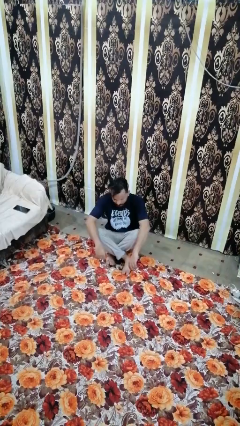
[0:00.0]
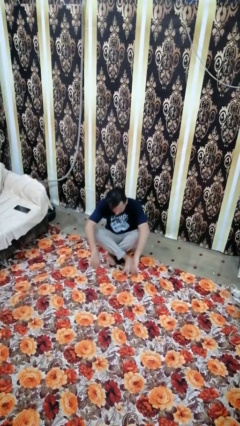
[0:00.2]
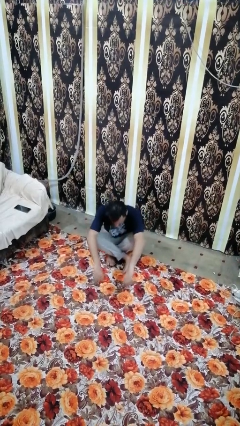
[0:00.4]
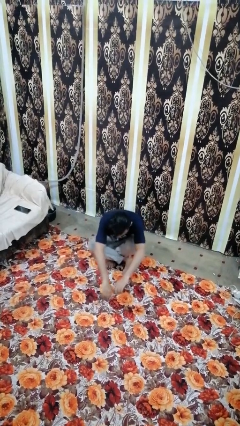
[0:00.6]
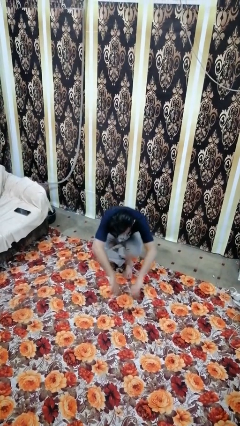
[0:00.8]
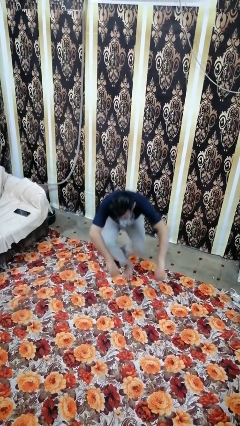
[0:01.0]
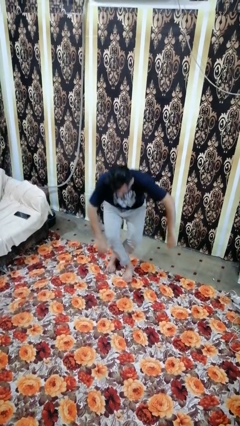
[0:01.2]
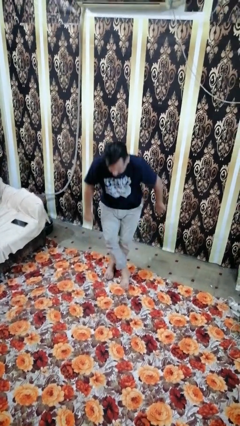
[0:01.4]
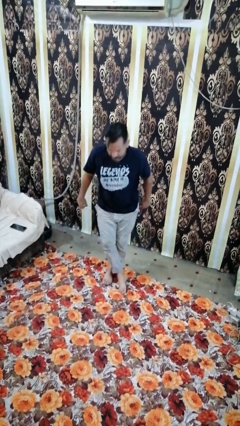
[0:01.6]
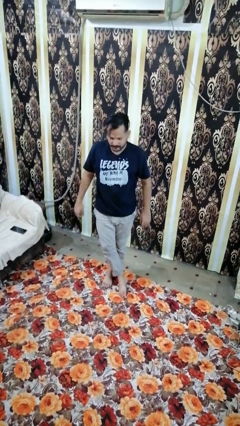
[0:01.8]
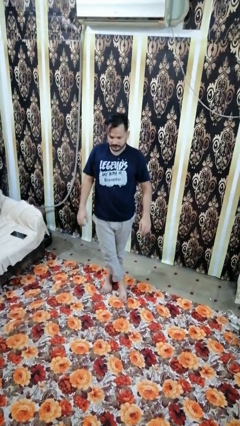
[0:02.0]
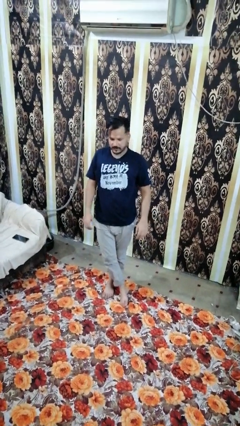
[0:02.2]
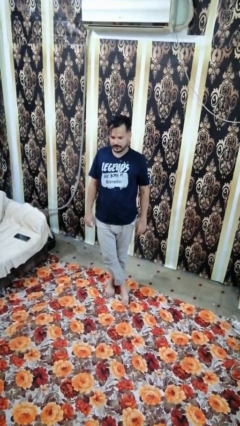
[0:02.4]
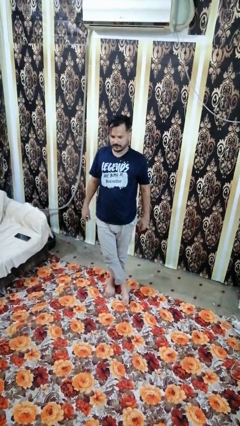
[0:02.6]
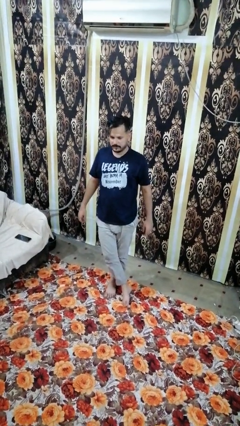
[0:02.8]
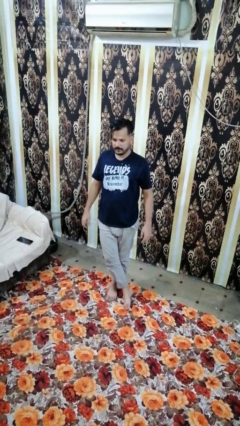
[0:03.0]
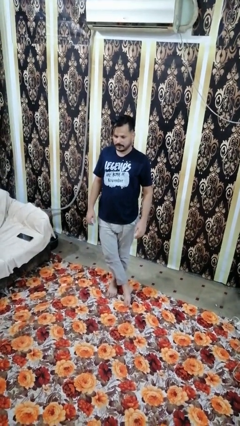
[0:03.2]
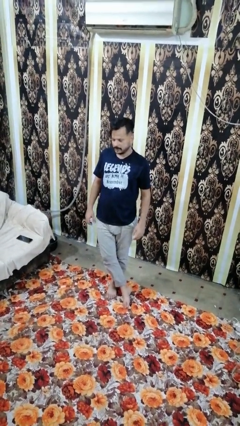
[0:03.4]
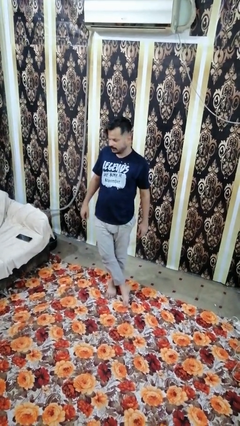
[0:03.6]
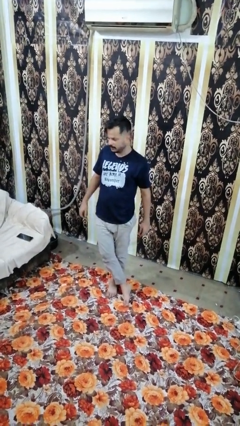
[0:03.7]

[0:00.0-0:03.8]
person stands up from floor

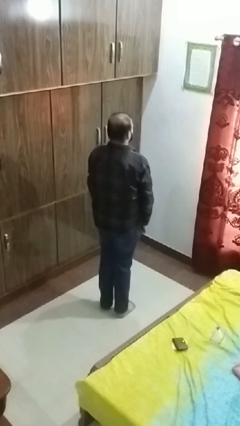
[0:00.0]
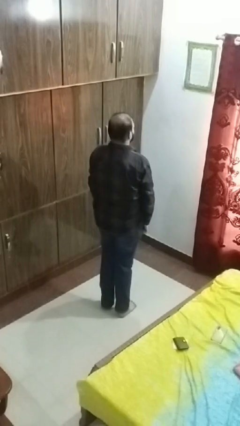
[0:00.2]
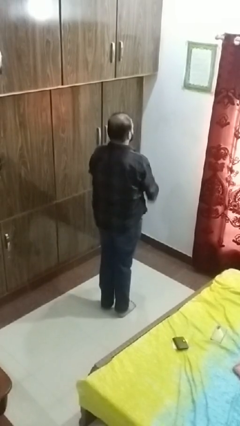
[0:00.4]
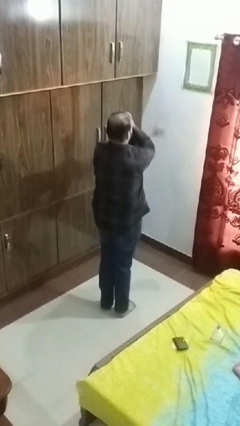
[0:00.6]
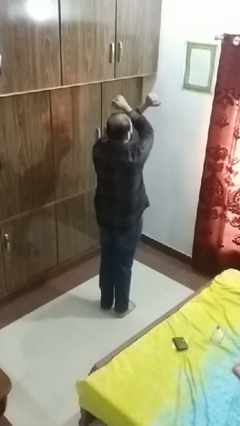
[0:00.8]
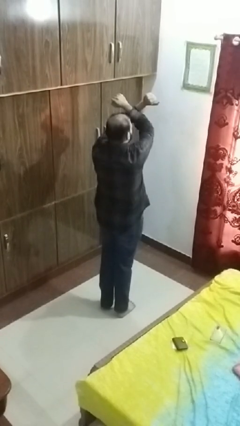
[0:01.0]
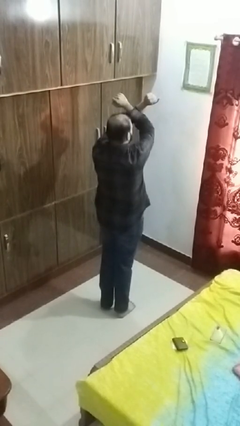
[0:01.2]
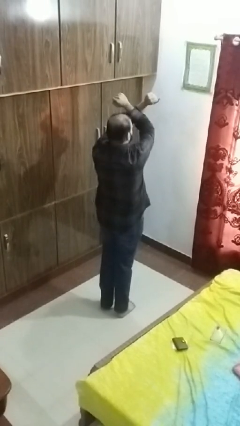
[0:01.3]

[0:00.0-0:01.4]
person gestures arms x

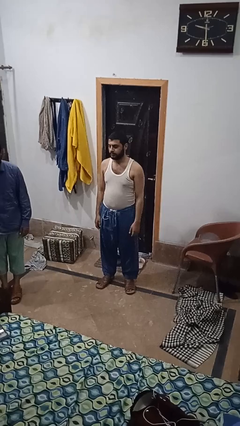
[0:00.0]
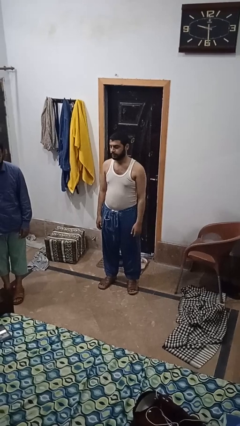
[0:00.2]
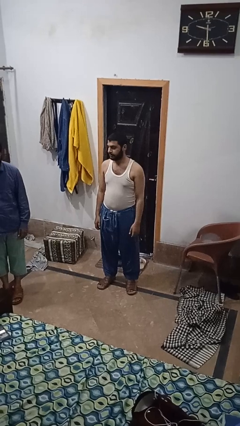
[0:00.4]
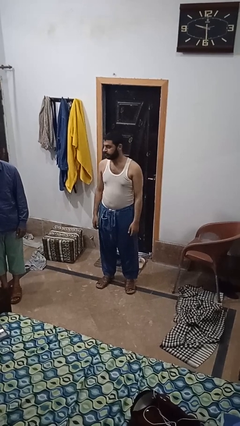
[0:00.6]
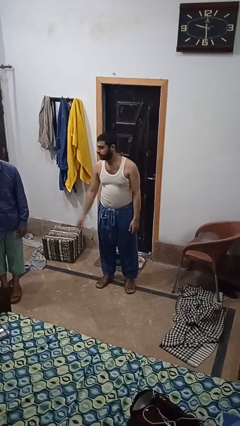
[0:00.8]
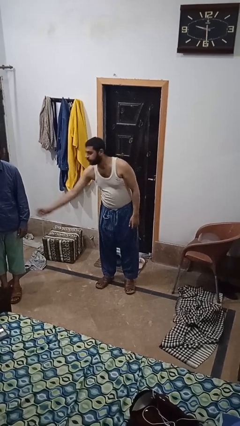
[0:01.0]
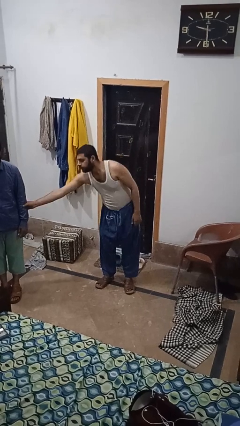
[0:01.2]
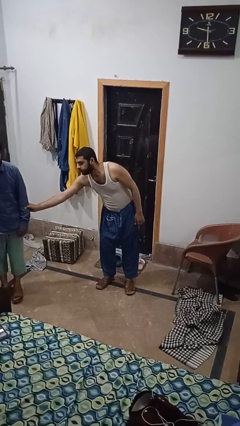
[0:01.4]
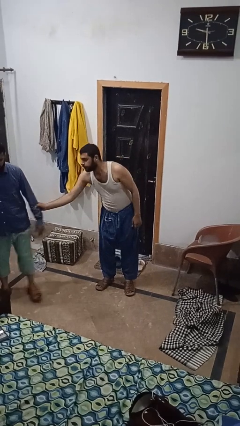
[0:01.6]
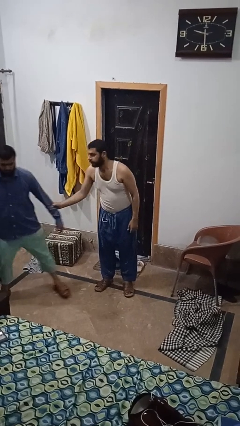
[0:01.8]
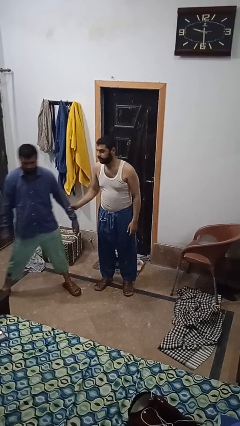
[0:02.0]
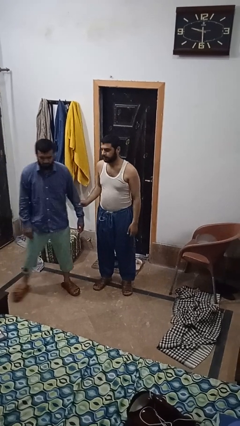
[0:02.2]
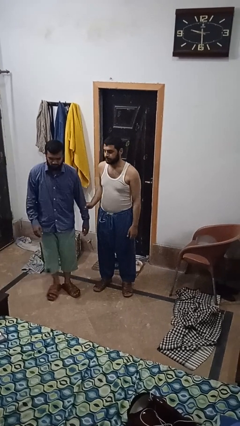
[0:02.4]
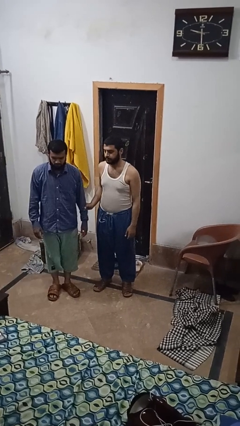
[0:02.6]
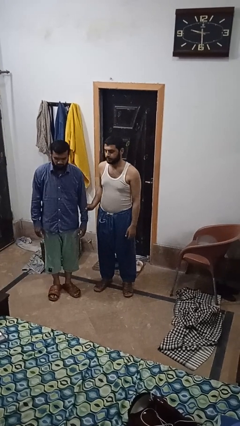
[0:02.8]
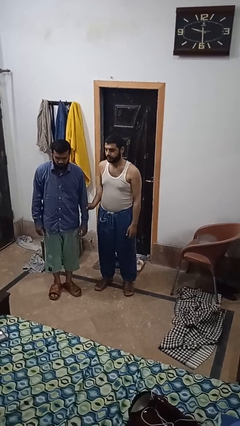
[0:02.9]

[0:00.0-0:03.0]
person grabs person by forearm

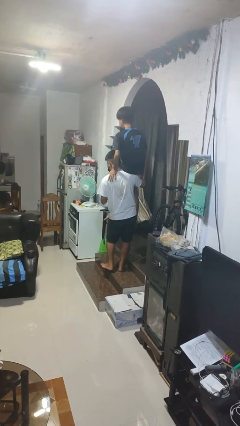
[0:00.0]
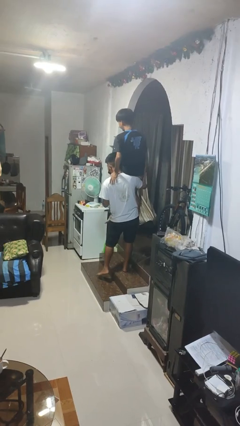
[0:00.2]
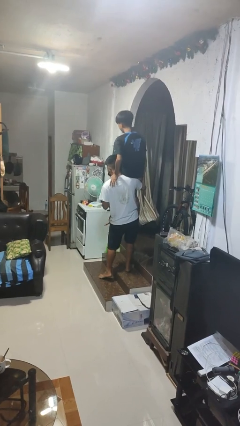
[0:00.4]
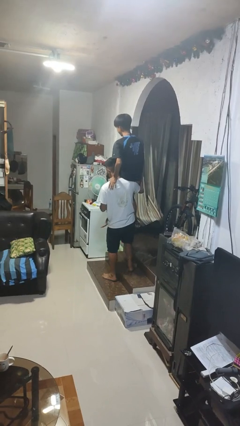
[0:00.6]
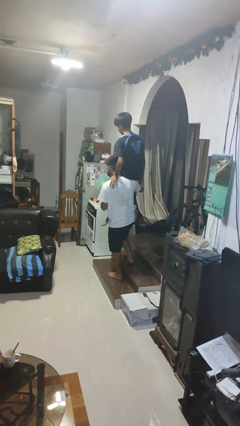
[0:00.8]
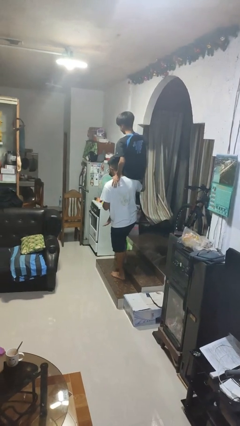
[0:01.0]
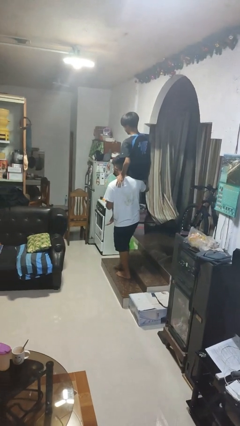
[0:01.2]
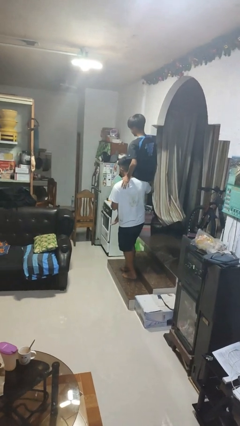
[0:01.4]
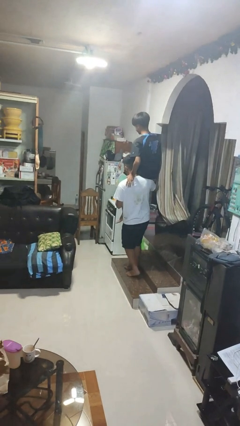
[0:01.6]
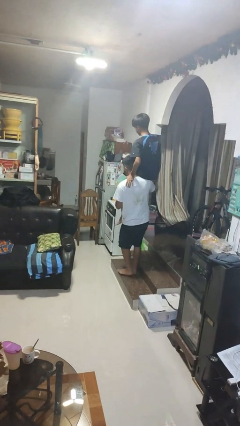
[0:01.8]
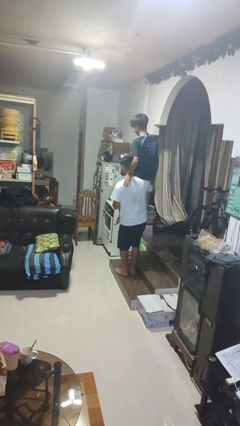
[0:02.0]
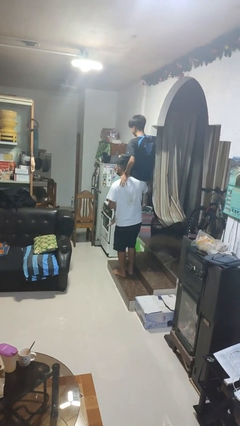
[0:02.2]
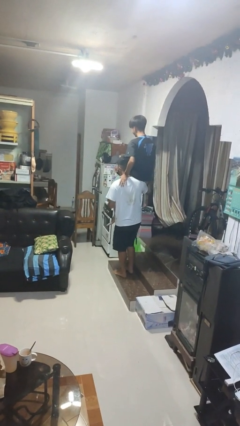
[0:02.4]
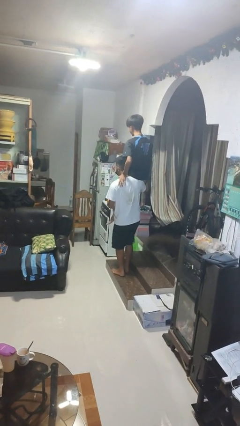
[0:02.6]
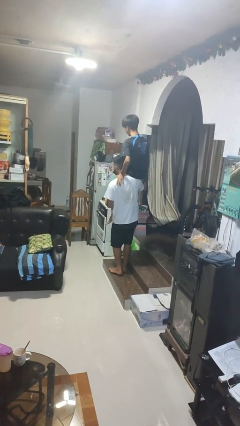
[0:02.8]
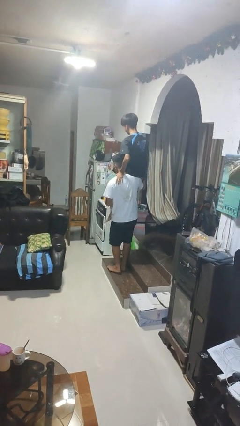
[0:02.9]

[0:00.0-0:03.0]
person carries person on shoulders

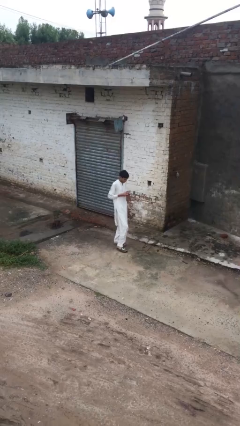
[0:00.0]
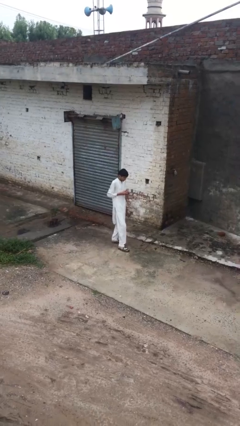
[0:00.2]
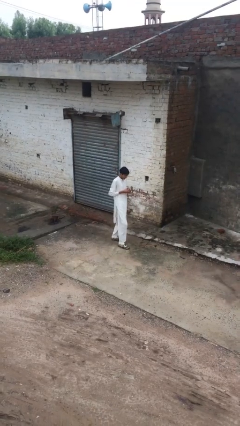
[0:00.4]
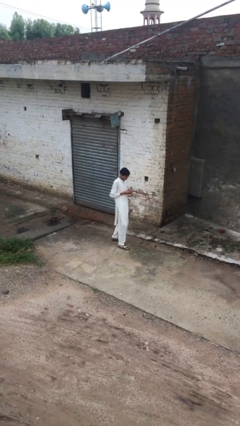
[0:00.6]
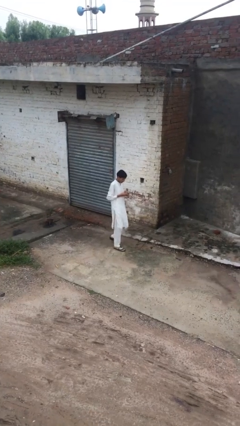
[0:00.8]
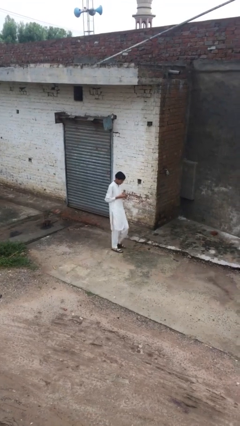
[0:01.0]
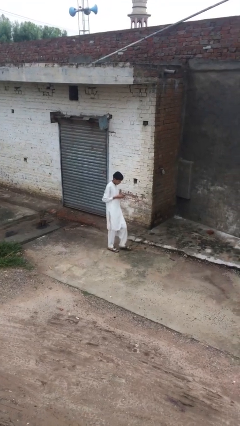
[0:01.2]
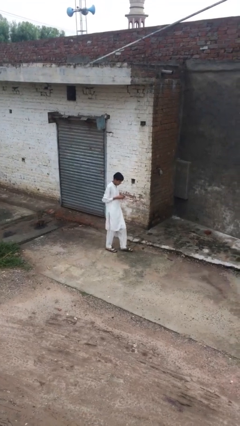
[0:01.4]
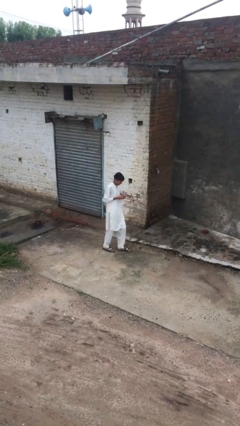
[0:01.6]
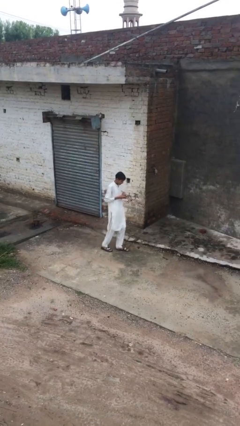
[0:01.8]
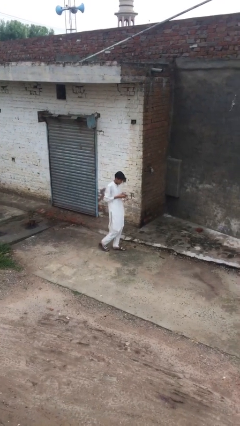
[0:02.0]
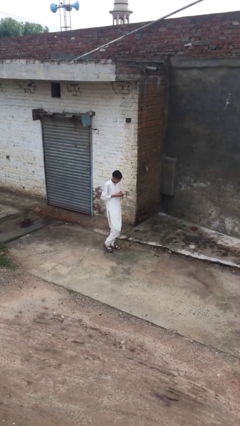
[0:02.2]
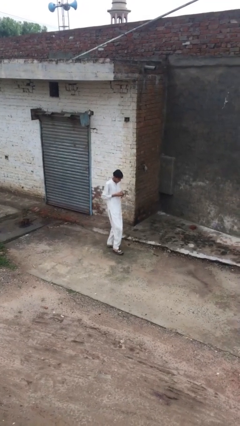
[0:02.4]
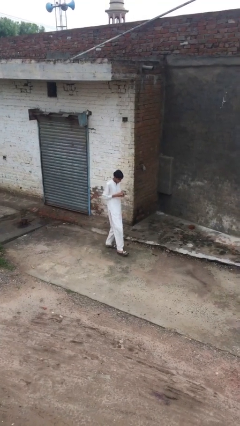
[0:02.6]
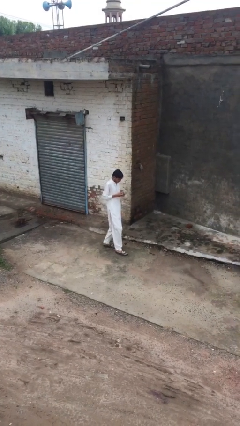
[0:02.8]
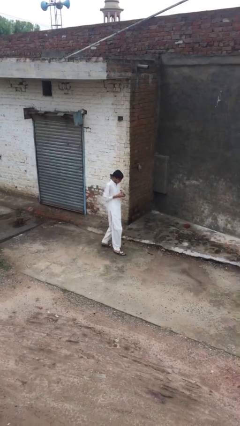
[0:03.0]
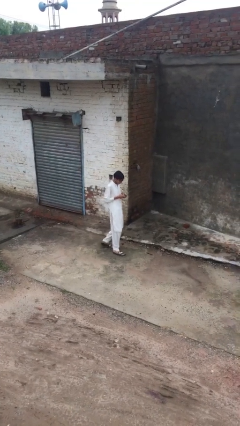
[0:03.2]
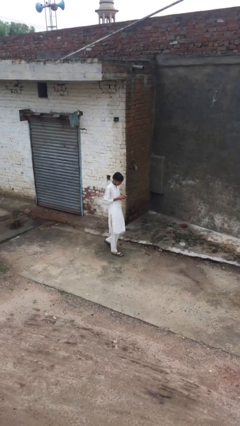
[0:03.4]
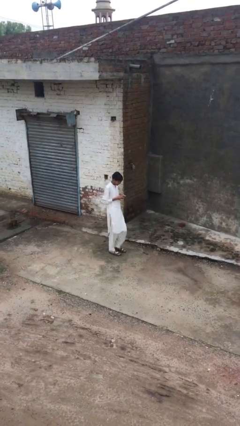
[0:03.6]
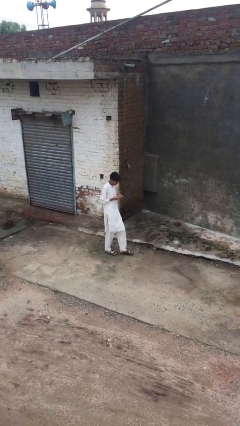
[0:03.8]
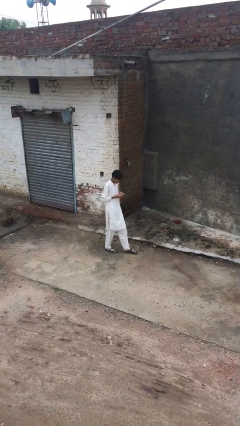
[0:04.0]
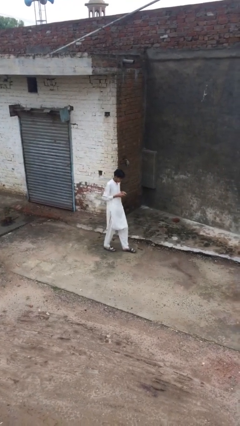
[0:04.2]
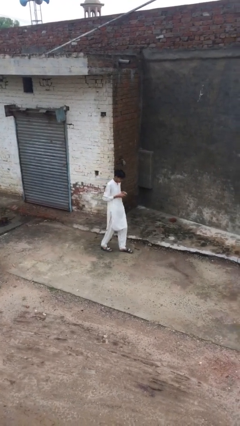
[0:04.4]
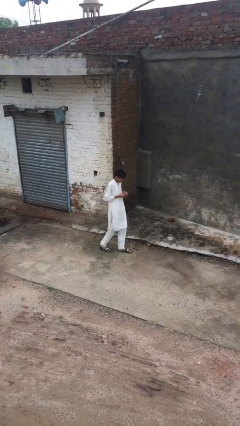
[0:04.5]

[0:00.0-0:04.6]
person texts on phone

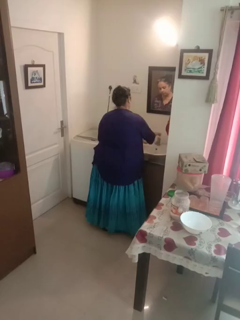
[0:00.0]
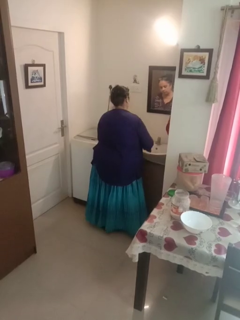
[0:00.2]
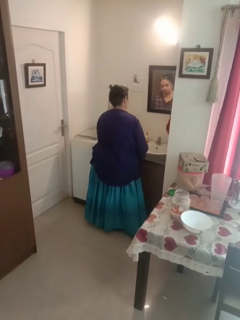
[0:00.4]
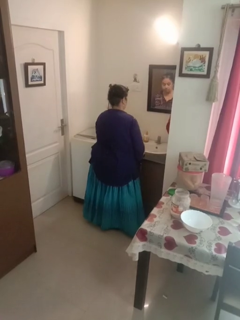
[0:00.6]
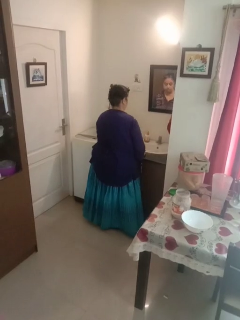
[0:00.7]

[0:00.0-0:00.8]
person turns off faucet

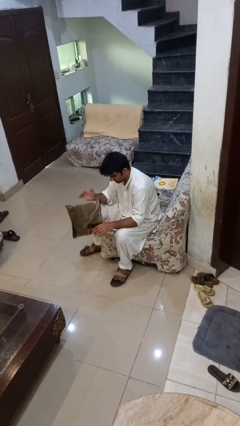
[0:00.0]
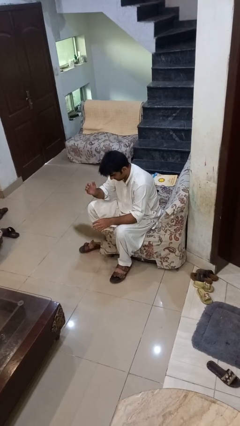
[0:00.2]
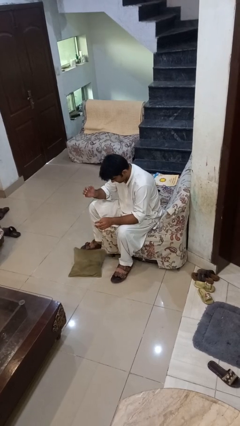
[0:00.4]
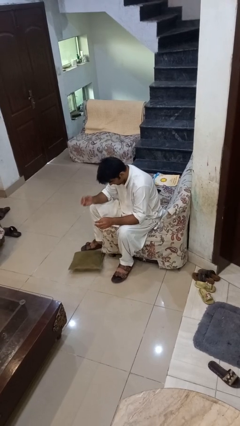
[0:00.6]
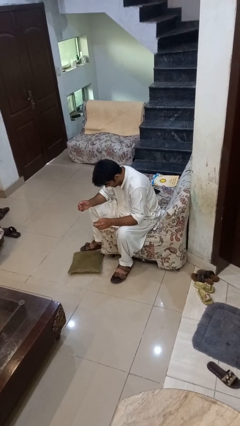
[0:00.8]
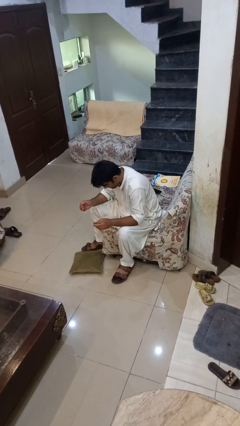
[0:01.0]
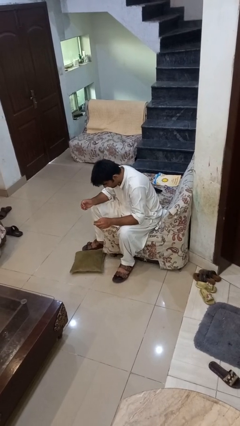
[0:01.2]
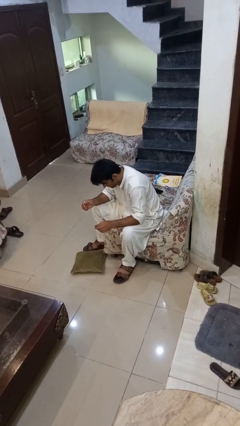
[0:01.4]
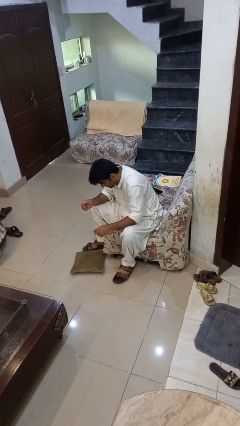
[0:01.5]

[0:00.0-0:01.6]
person drops object
